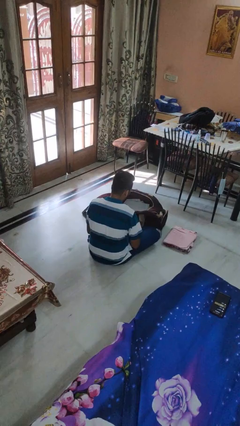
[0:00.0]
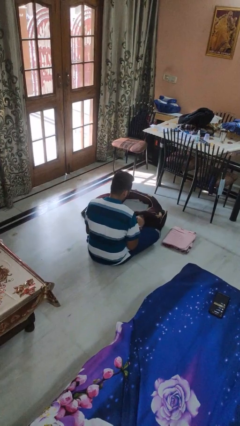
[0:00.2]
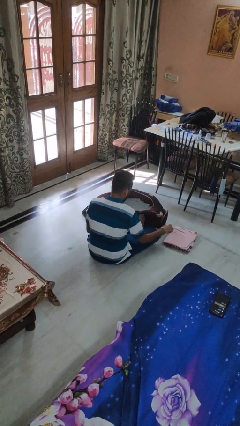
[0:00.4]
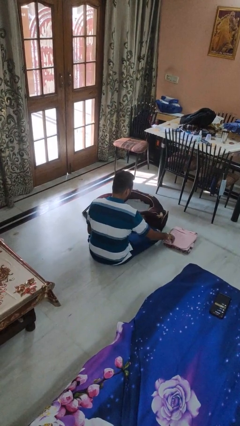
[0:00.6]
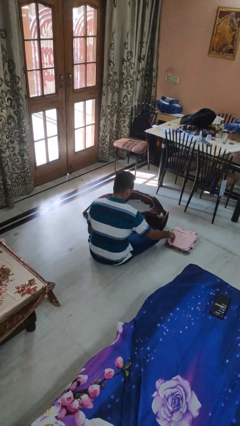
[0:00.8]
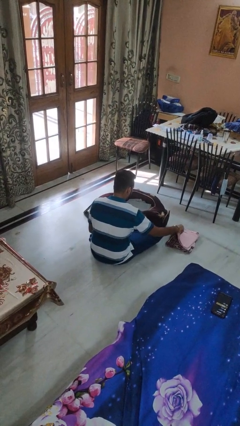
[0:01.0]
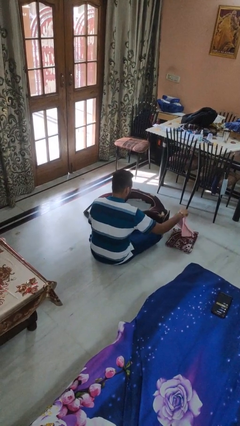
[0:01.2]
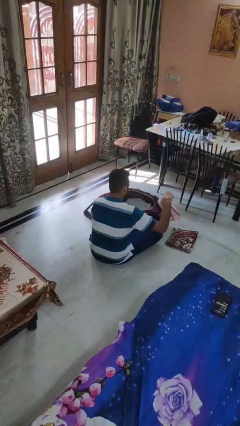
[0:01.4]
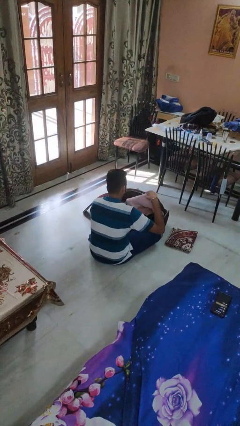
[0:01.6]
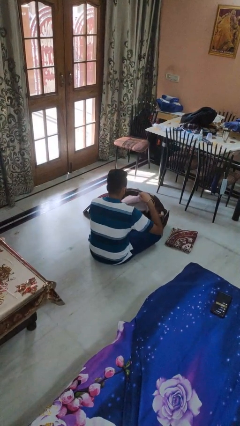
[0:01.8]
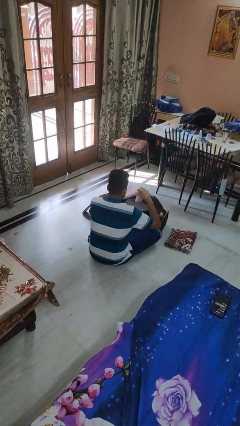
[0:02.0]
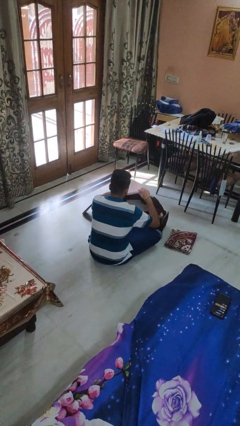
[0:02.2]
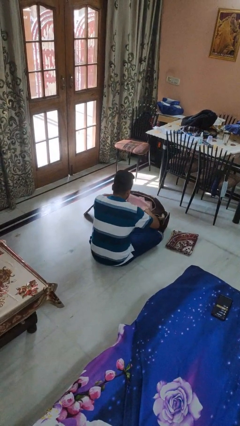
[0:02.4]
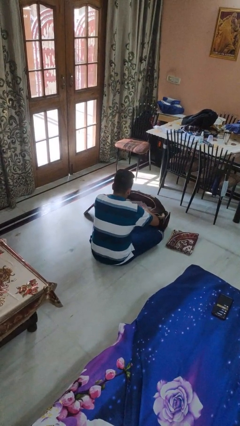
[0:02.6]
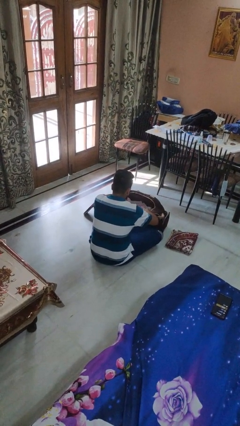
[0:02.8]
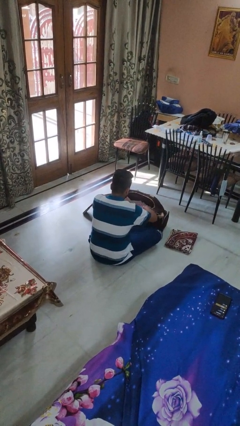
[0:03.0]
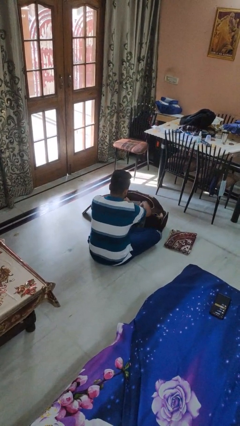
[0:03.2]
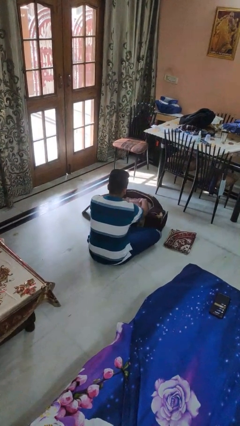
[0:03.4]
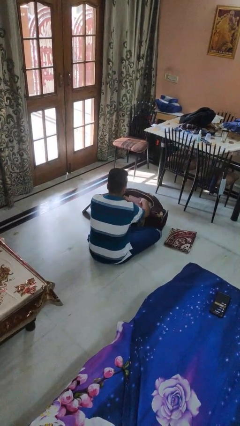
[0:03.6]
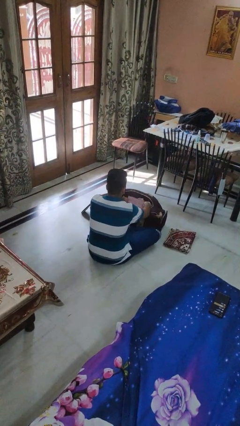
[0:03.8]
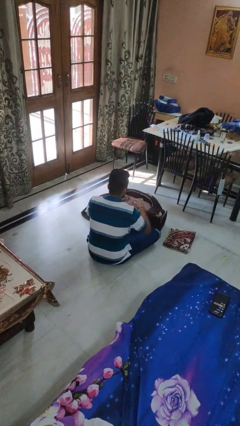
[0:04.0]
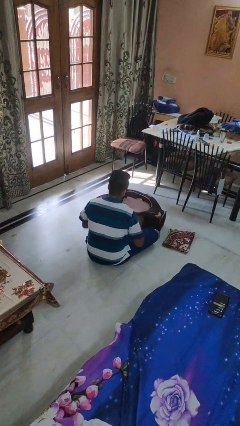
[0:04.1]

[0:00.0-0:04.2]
person loads clothes into suitcase

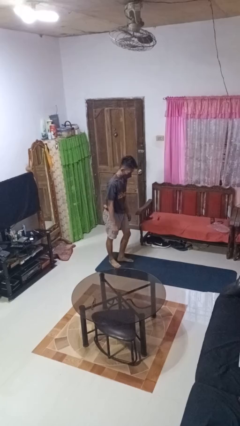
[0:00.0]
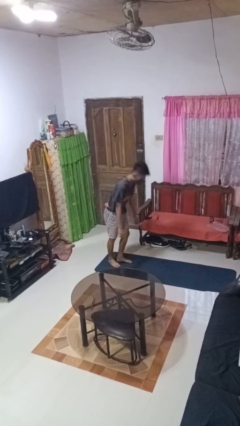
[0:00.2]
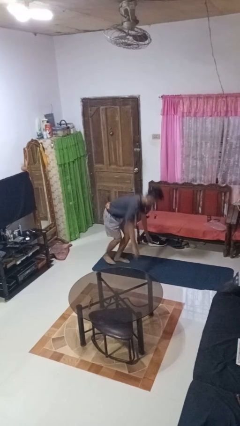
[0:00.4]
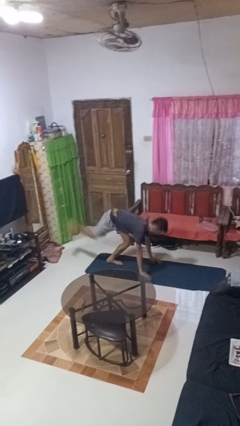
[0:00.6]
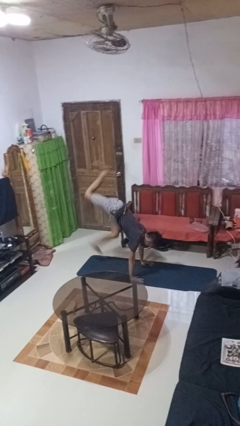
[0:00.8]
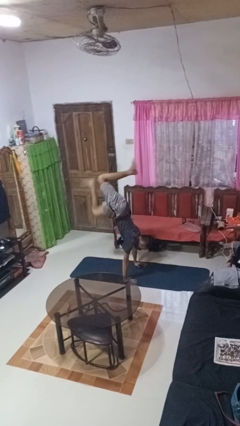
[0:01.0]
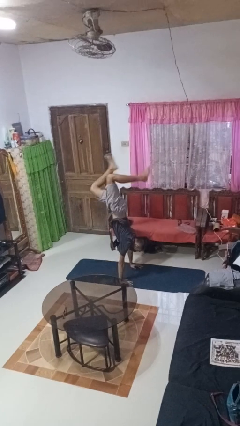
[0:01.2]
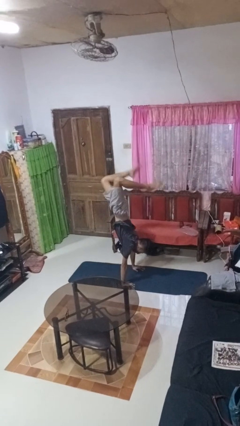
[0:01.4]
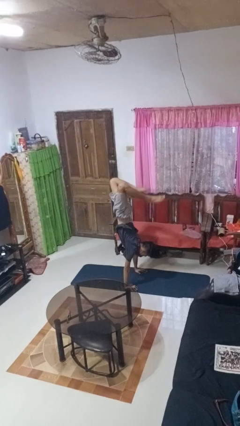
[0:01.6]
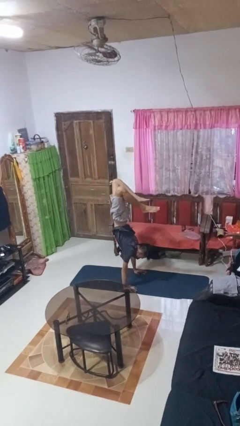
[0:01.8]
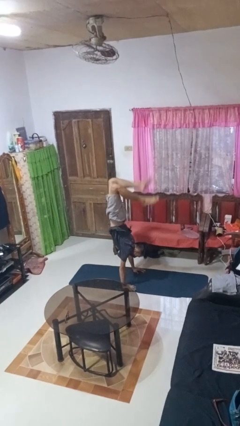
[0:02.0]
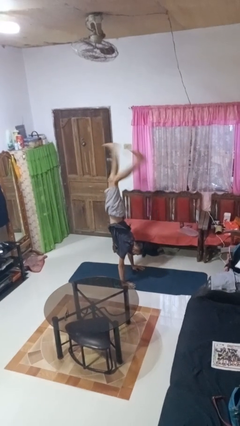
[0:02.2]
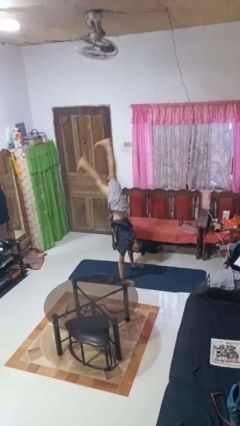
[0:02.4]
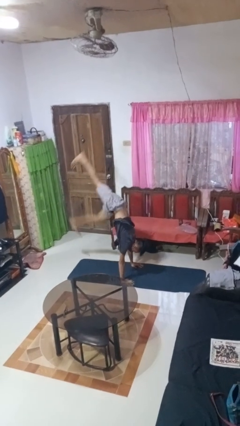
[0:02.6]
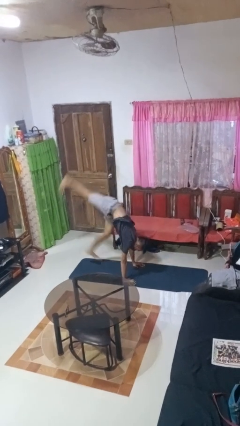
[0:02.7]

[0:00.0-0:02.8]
person handstand

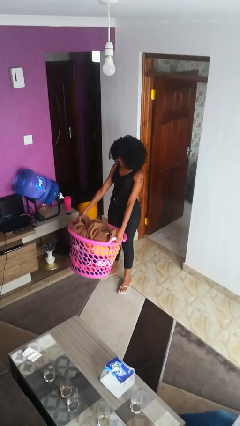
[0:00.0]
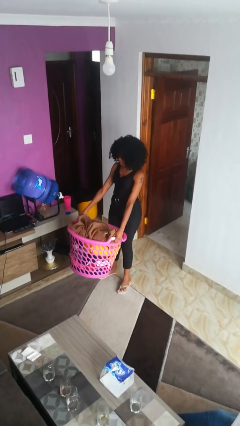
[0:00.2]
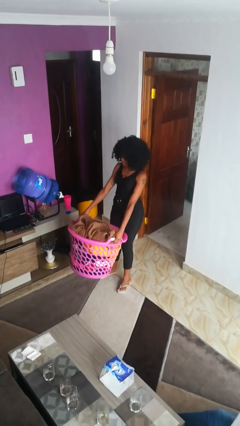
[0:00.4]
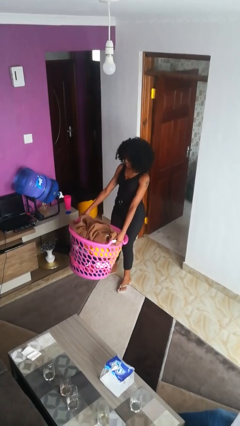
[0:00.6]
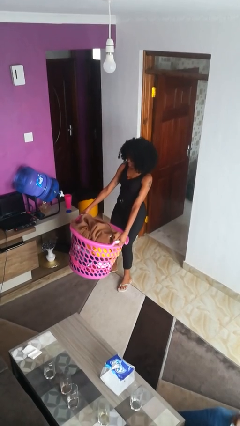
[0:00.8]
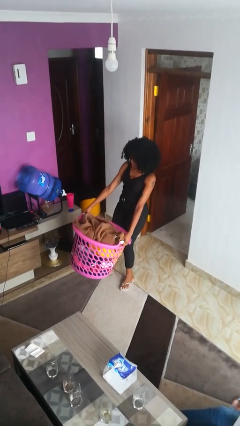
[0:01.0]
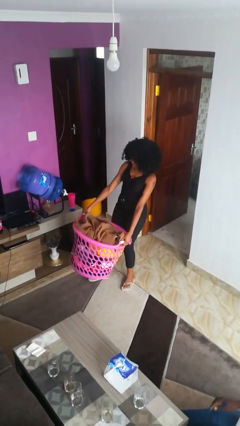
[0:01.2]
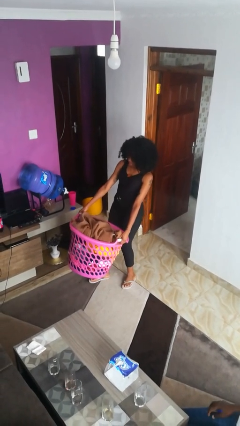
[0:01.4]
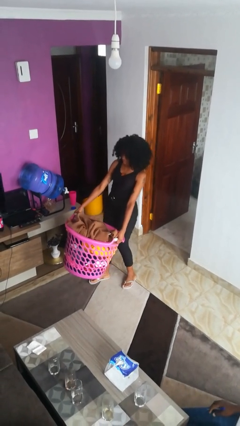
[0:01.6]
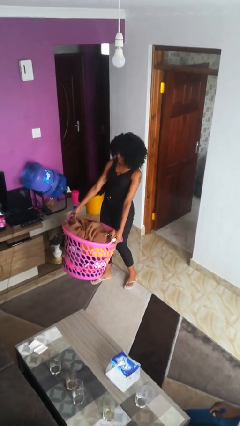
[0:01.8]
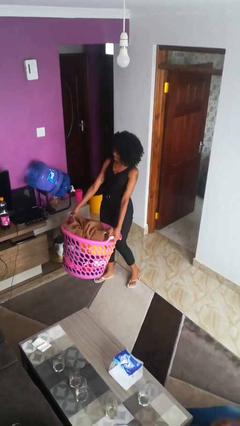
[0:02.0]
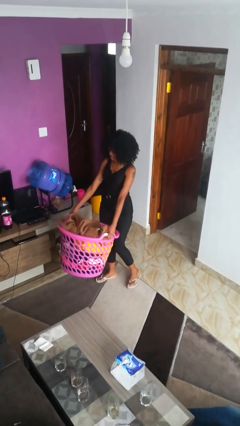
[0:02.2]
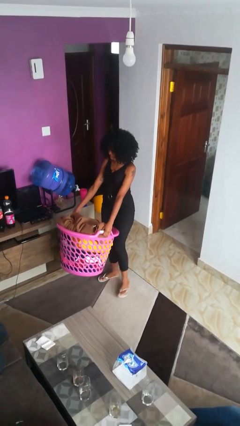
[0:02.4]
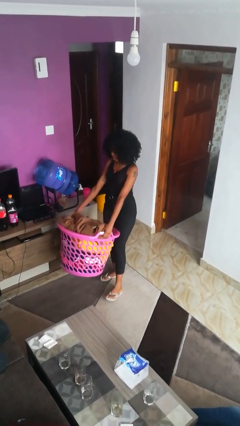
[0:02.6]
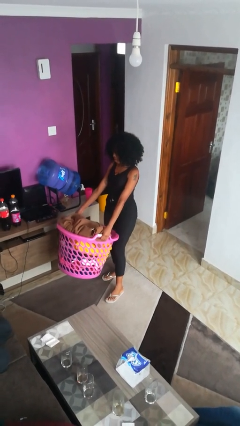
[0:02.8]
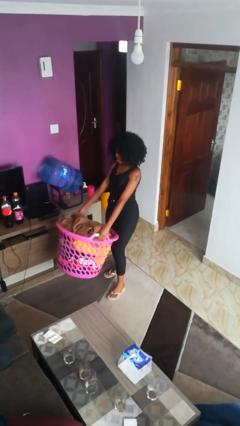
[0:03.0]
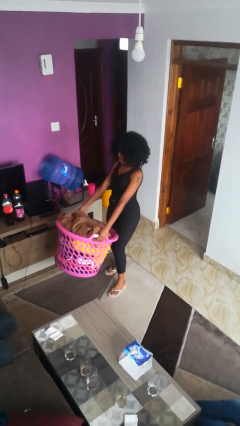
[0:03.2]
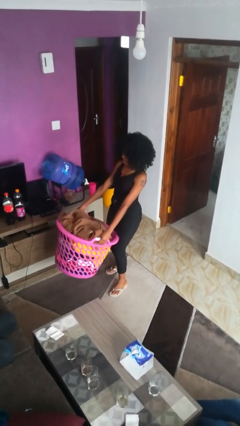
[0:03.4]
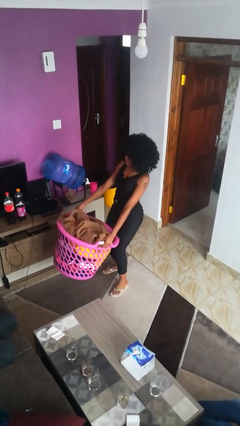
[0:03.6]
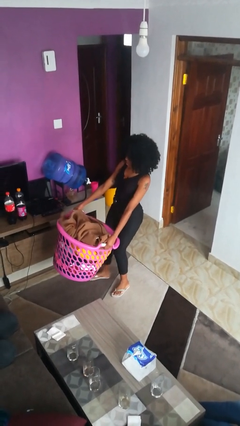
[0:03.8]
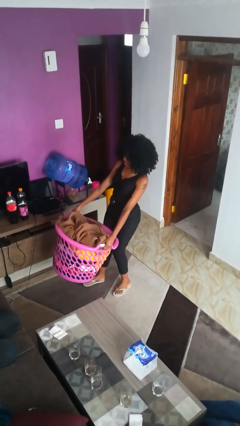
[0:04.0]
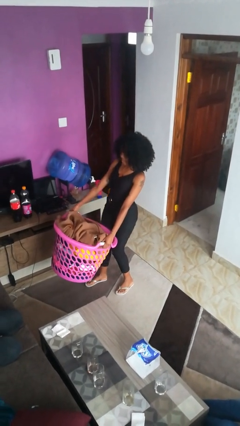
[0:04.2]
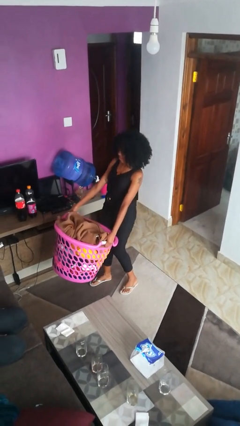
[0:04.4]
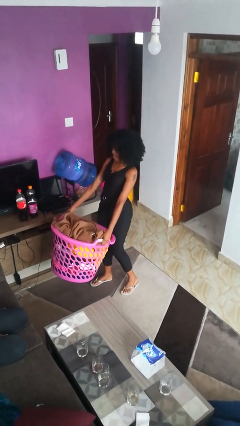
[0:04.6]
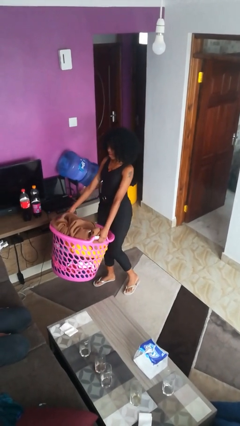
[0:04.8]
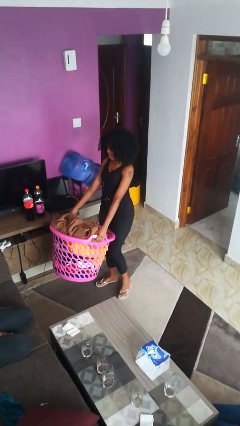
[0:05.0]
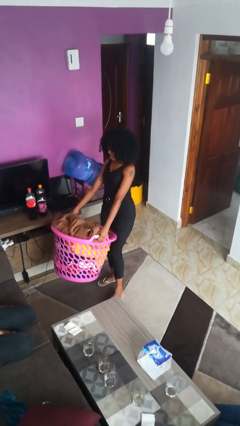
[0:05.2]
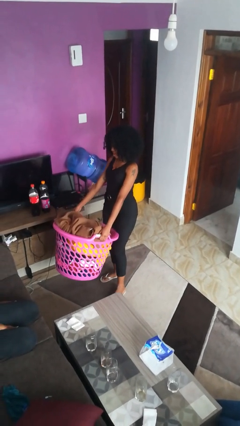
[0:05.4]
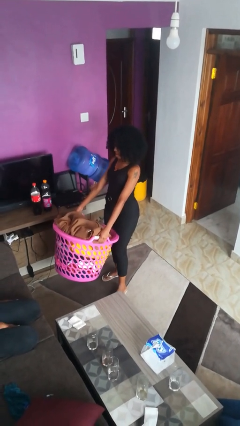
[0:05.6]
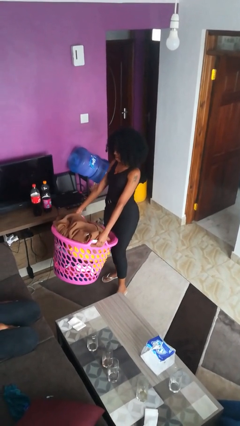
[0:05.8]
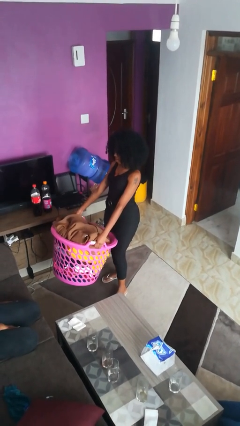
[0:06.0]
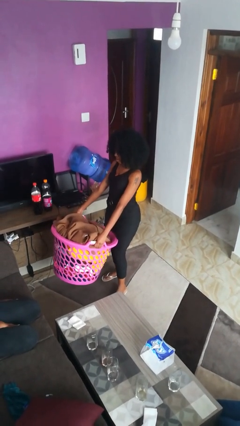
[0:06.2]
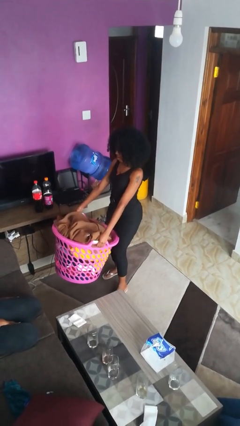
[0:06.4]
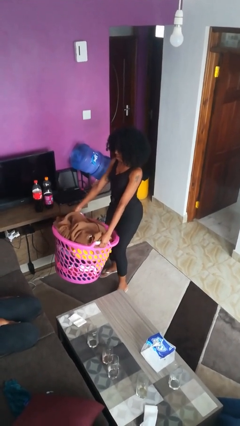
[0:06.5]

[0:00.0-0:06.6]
person carries laundry basket

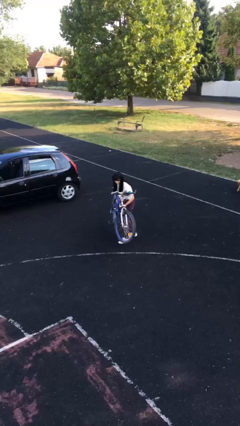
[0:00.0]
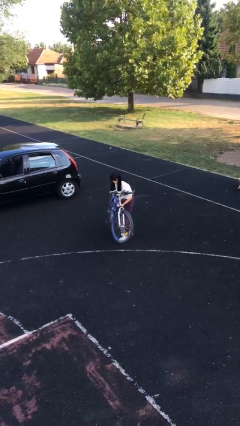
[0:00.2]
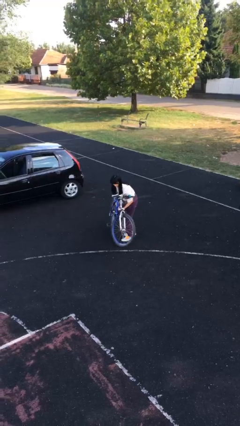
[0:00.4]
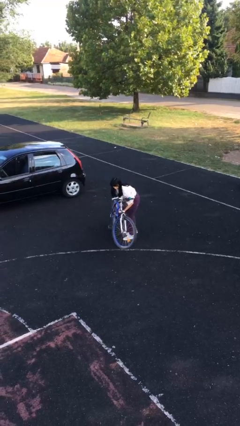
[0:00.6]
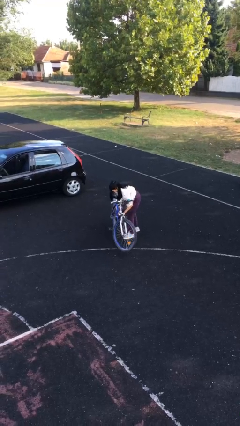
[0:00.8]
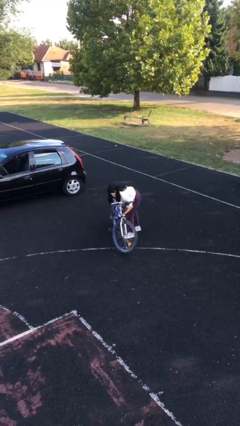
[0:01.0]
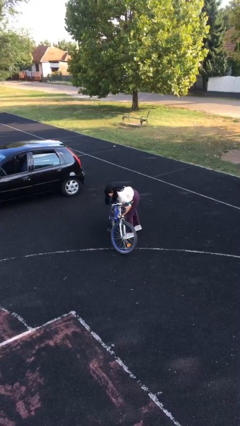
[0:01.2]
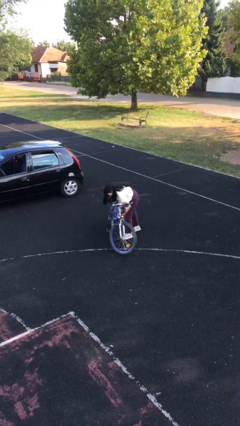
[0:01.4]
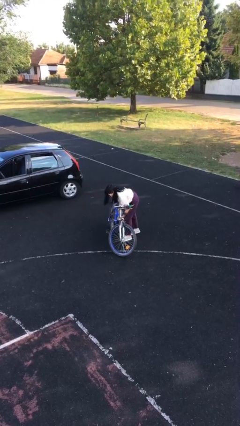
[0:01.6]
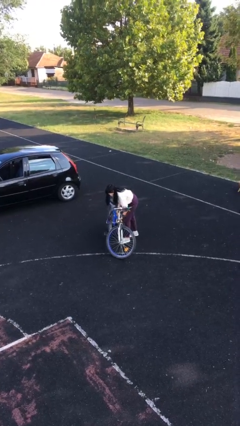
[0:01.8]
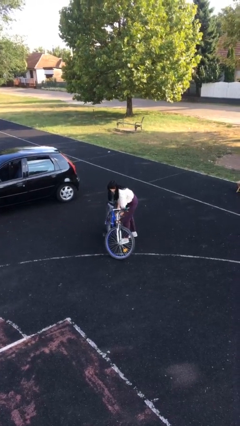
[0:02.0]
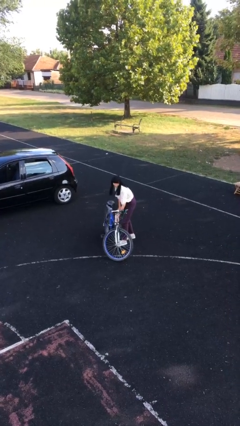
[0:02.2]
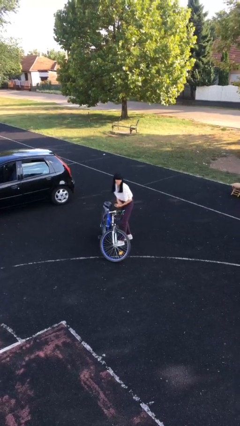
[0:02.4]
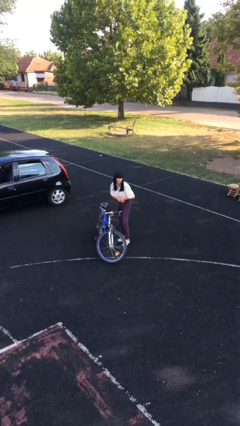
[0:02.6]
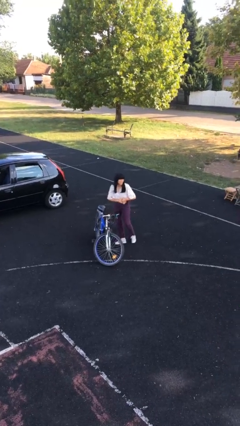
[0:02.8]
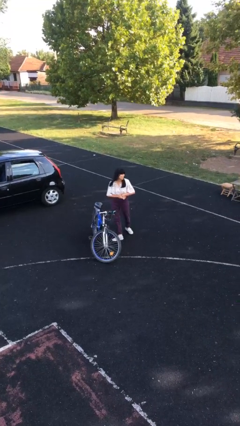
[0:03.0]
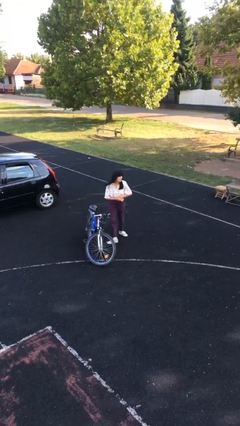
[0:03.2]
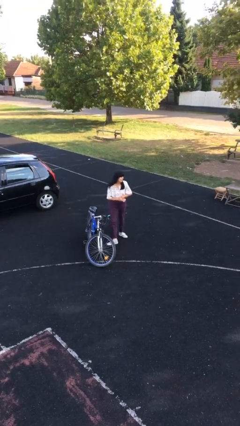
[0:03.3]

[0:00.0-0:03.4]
person puts down object on floor

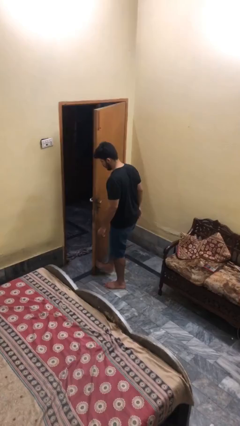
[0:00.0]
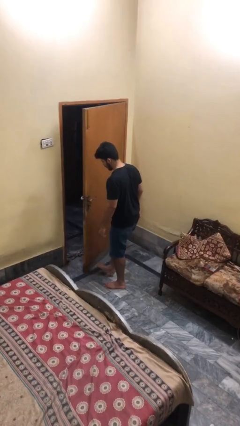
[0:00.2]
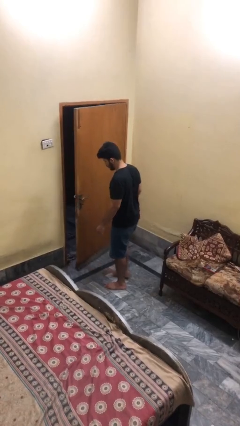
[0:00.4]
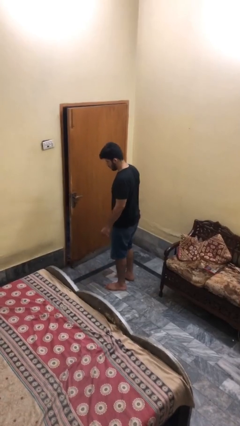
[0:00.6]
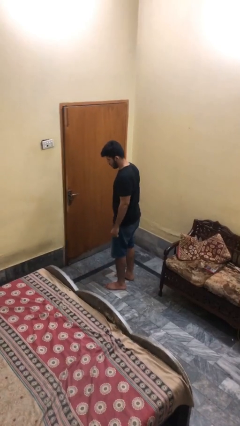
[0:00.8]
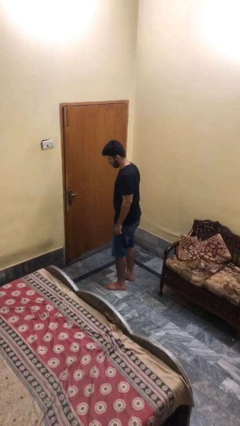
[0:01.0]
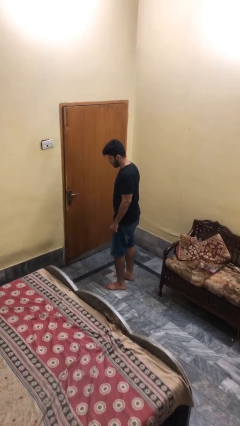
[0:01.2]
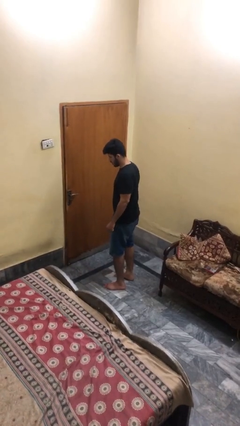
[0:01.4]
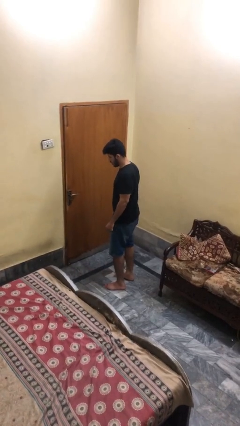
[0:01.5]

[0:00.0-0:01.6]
person closes door with foot
